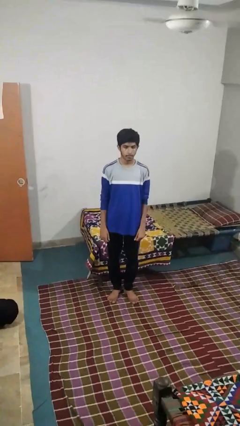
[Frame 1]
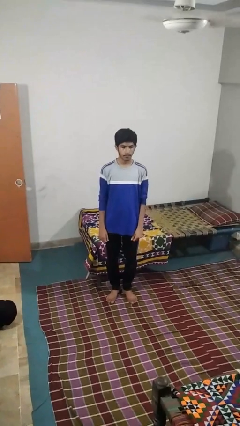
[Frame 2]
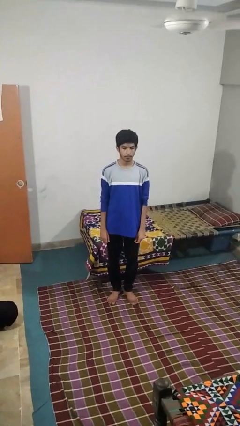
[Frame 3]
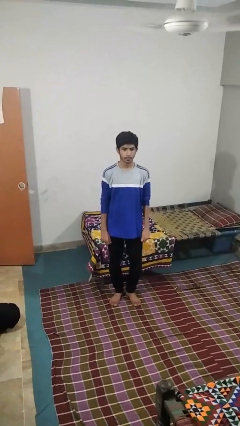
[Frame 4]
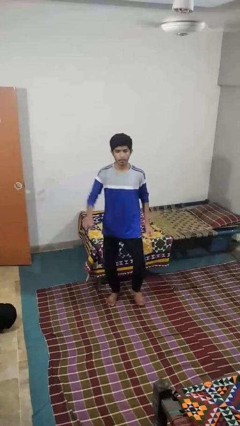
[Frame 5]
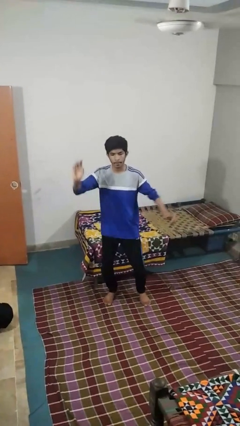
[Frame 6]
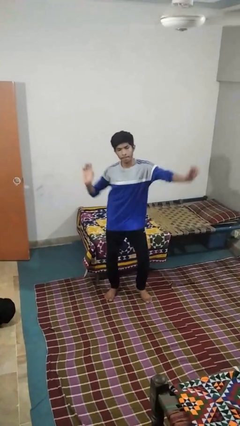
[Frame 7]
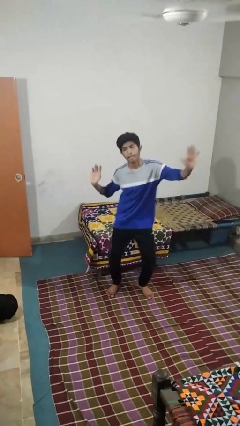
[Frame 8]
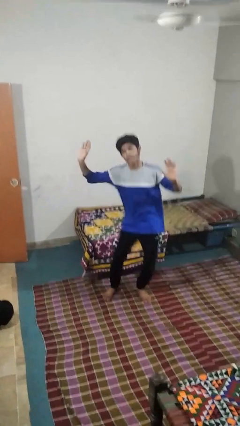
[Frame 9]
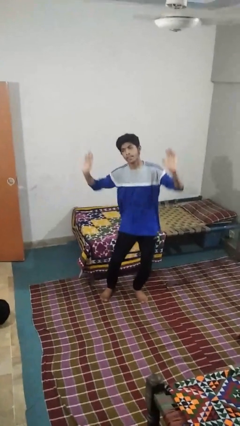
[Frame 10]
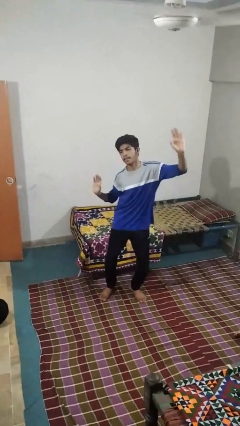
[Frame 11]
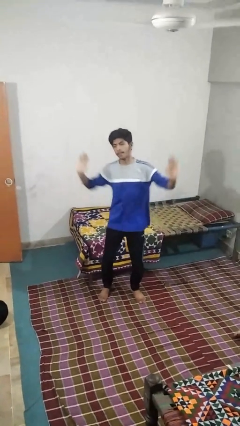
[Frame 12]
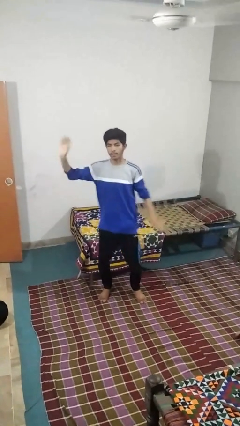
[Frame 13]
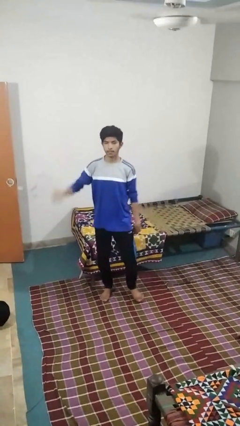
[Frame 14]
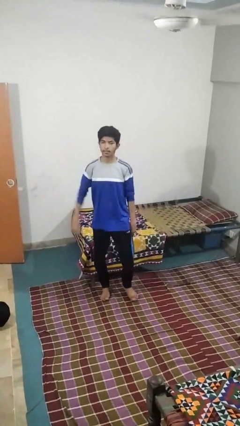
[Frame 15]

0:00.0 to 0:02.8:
person dances in place

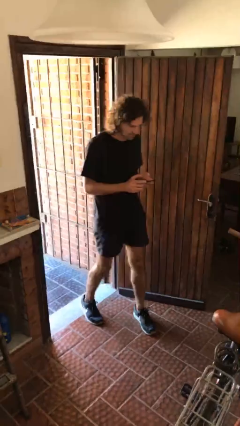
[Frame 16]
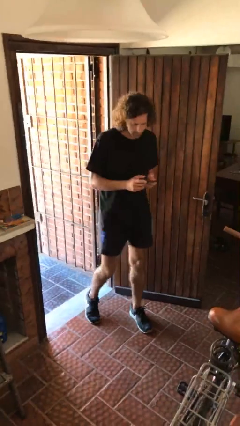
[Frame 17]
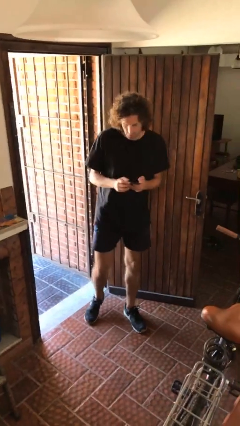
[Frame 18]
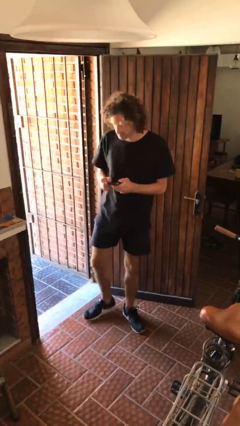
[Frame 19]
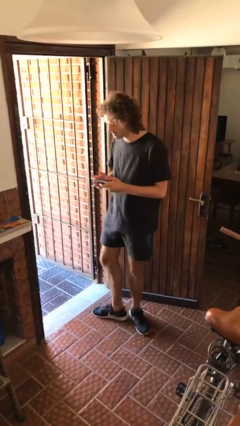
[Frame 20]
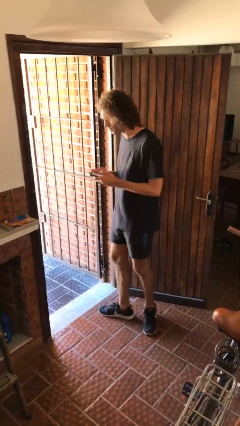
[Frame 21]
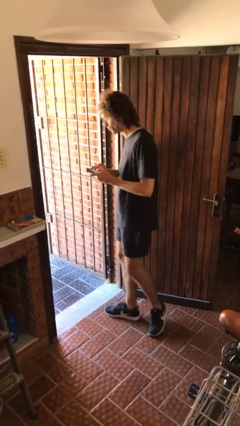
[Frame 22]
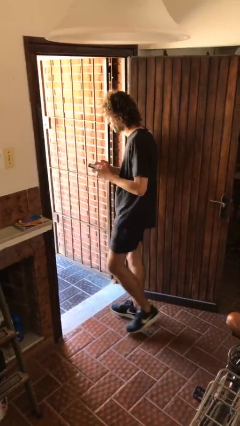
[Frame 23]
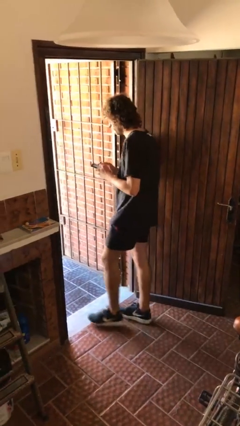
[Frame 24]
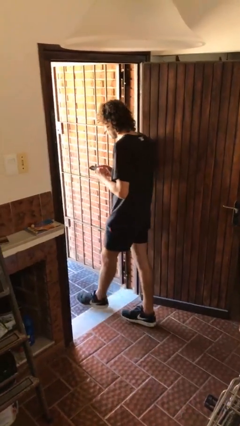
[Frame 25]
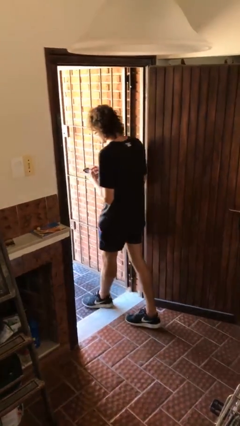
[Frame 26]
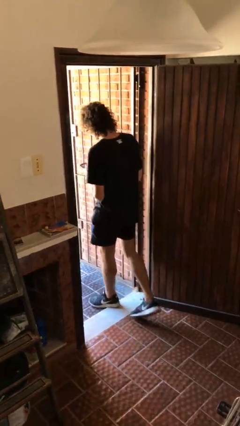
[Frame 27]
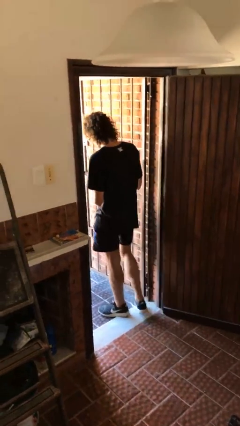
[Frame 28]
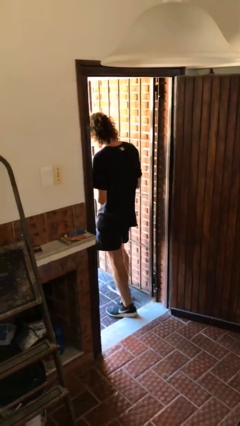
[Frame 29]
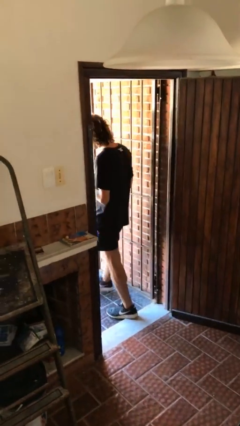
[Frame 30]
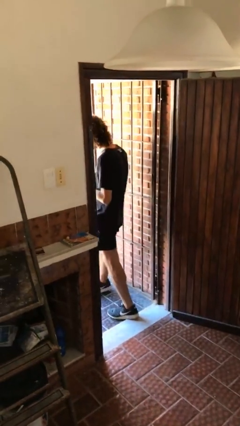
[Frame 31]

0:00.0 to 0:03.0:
person exits scene through structure

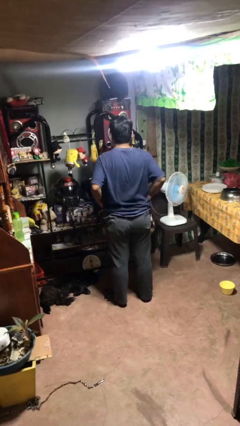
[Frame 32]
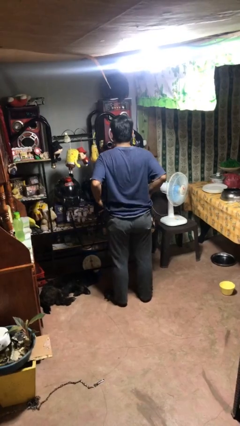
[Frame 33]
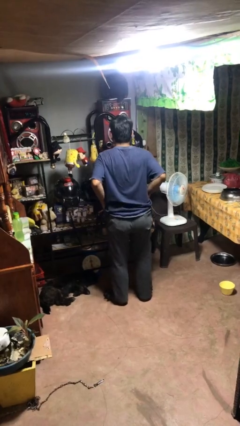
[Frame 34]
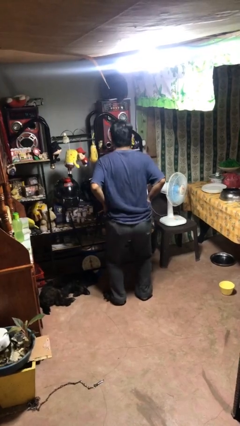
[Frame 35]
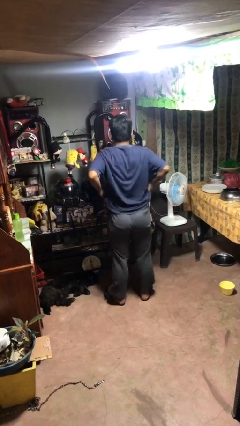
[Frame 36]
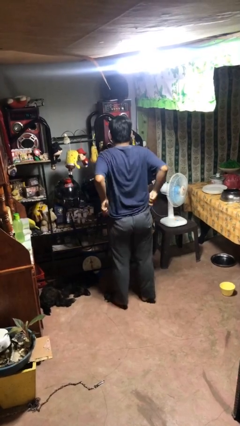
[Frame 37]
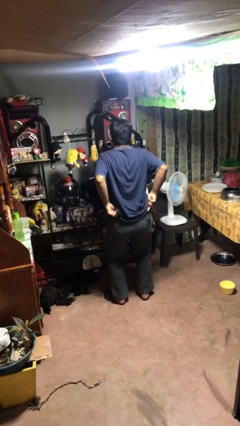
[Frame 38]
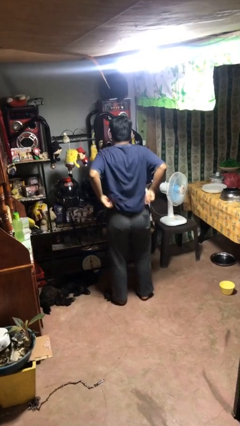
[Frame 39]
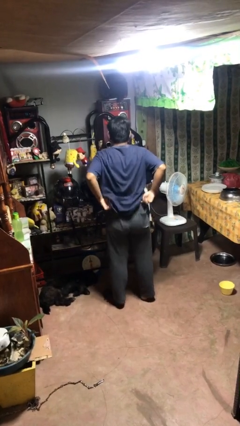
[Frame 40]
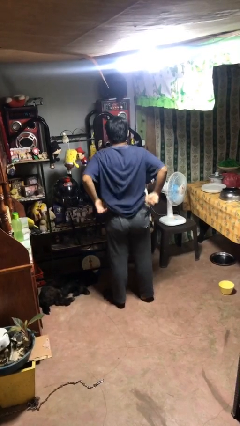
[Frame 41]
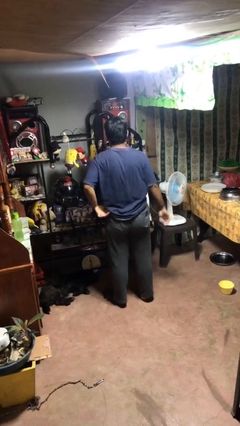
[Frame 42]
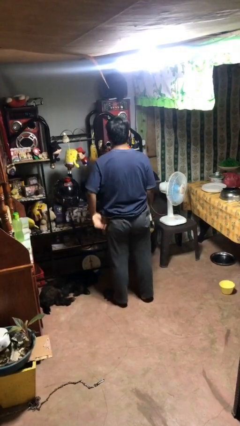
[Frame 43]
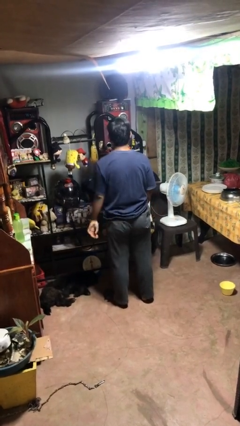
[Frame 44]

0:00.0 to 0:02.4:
person hikes up pants

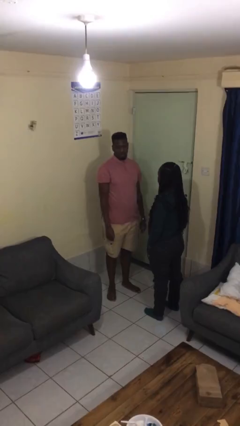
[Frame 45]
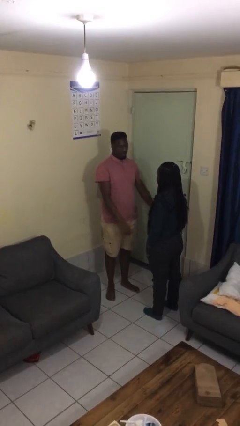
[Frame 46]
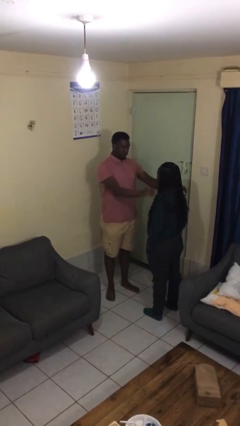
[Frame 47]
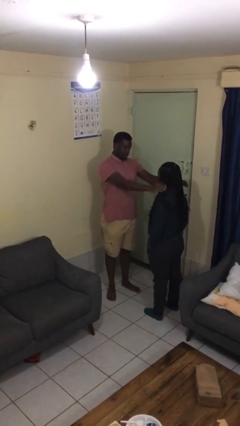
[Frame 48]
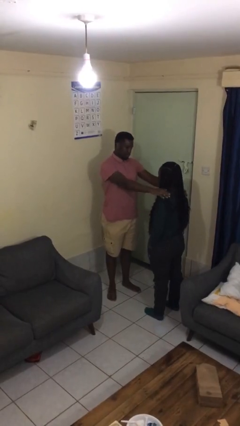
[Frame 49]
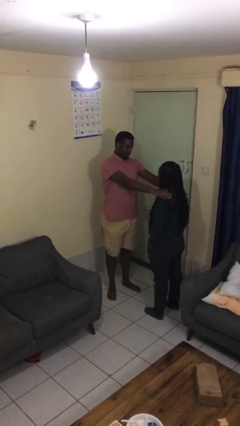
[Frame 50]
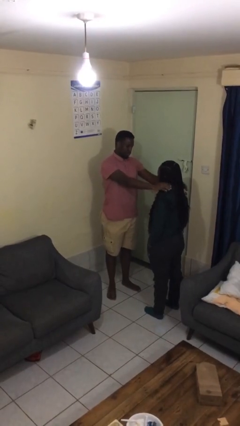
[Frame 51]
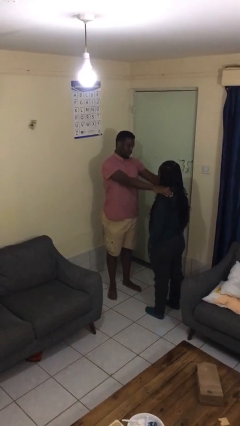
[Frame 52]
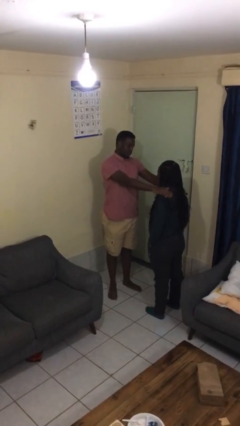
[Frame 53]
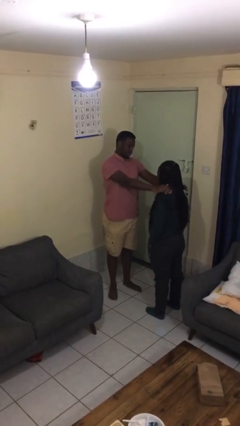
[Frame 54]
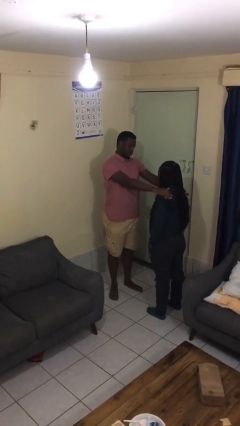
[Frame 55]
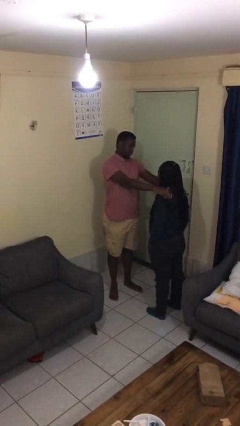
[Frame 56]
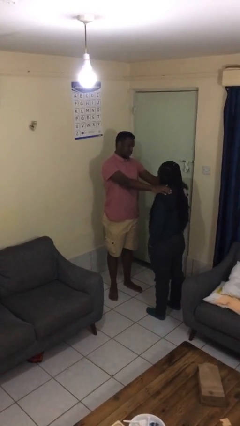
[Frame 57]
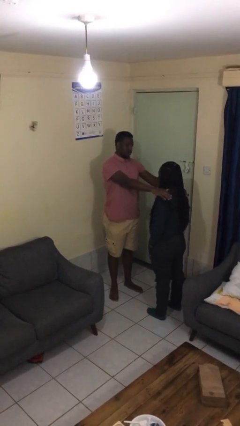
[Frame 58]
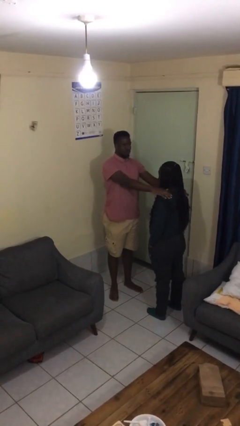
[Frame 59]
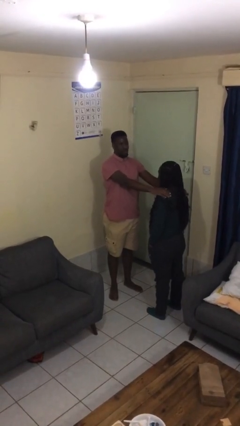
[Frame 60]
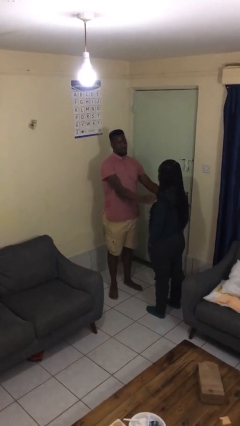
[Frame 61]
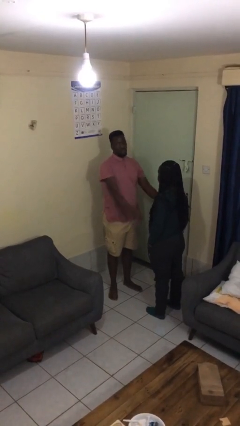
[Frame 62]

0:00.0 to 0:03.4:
person pounds shoulders of person

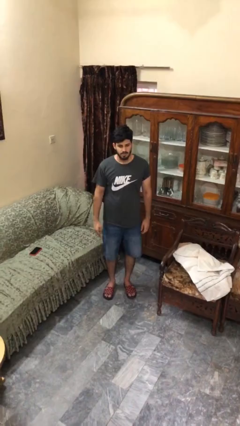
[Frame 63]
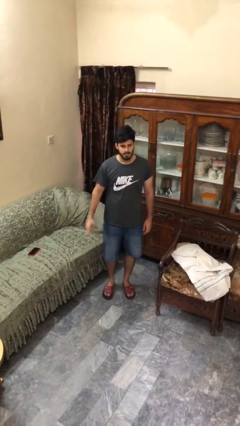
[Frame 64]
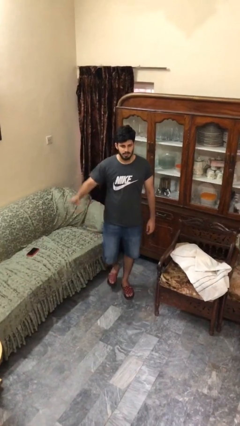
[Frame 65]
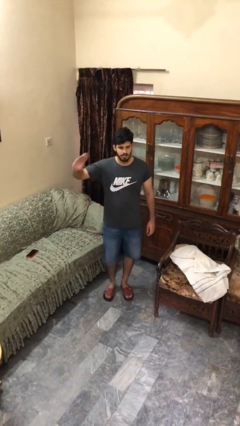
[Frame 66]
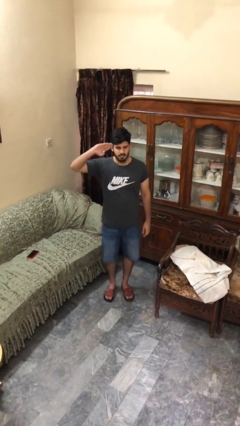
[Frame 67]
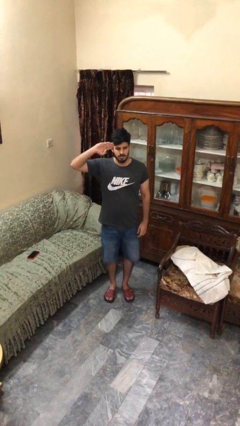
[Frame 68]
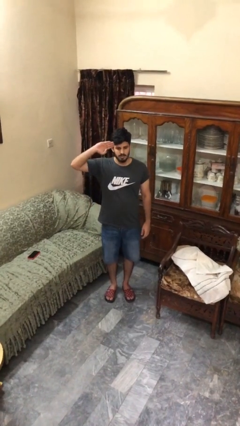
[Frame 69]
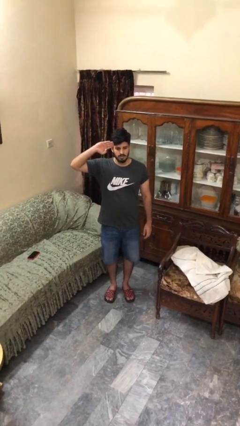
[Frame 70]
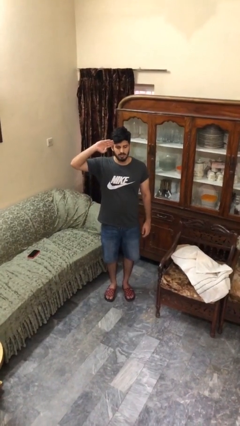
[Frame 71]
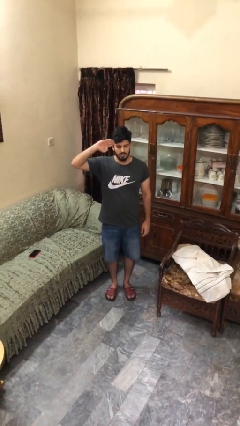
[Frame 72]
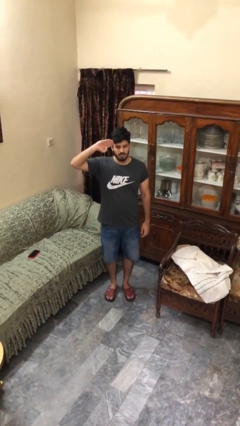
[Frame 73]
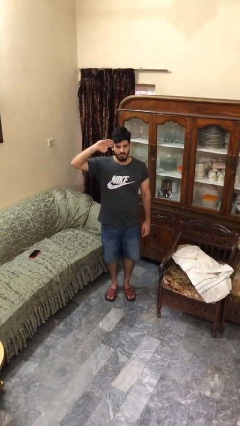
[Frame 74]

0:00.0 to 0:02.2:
person salutes

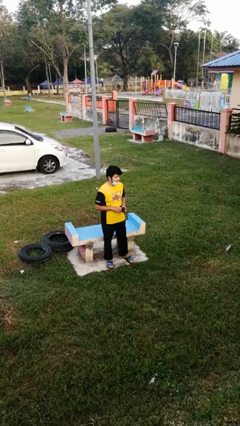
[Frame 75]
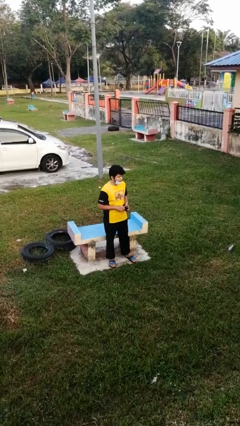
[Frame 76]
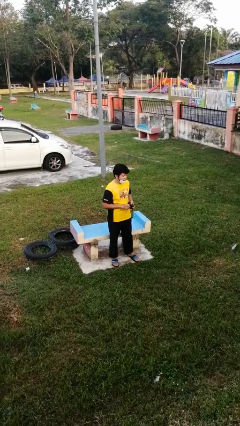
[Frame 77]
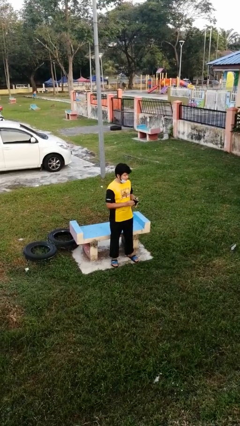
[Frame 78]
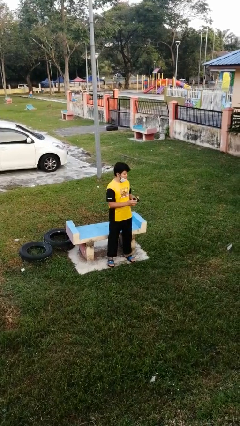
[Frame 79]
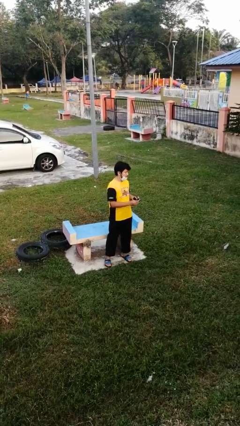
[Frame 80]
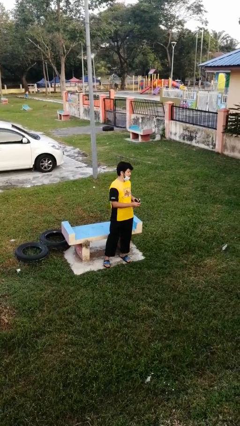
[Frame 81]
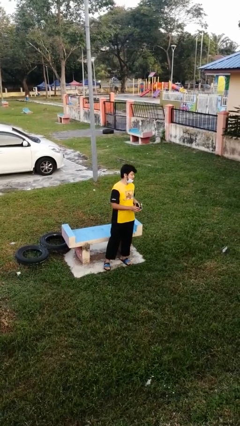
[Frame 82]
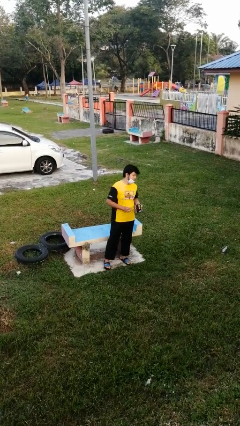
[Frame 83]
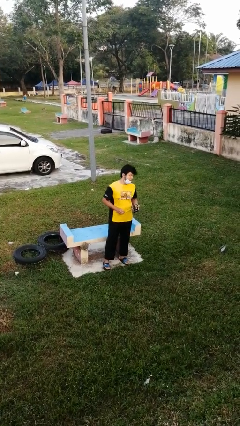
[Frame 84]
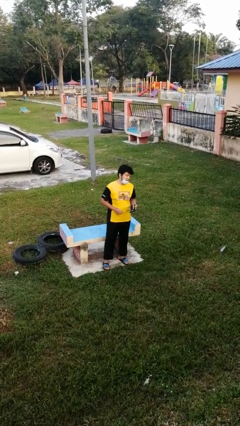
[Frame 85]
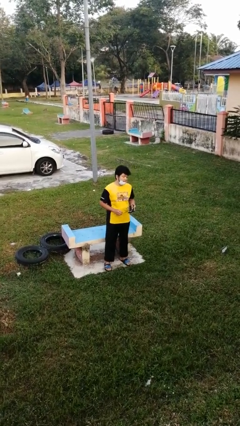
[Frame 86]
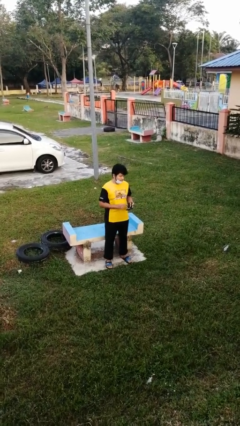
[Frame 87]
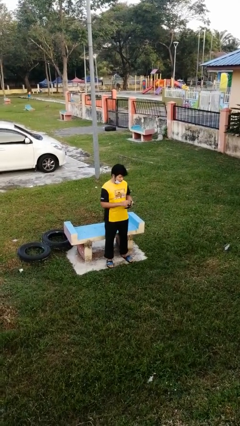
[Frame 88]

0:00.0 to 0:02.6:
person searches in purse

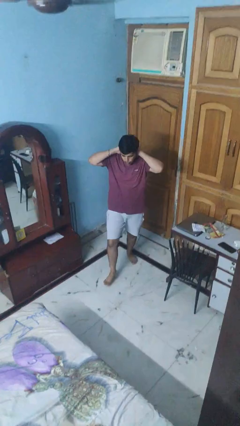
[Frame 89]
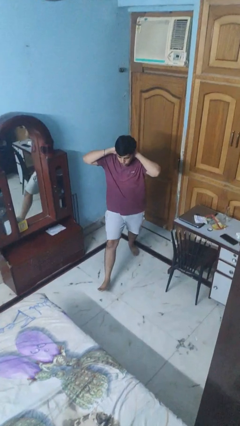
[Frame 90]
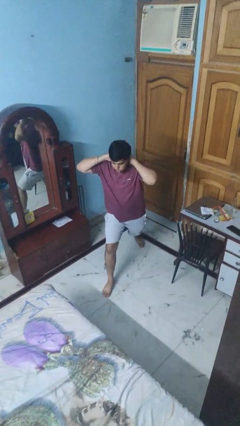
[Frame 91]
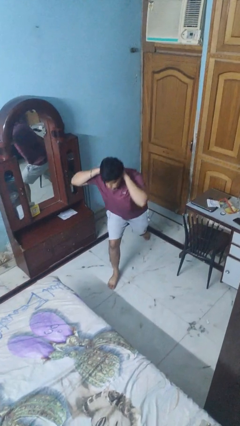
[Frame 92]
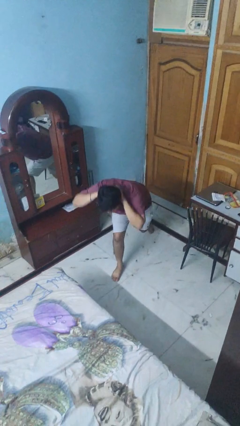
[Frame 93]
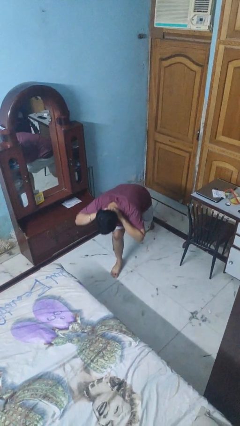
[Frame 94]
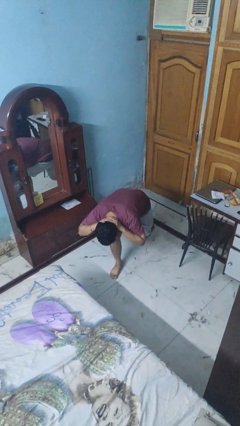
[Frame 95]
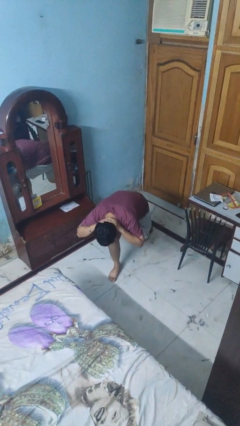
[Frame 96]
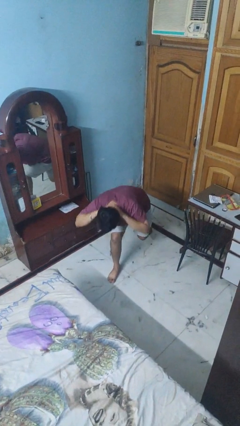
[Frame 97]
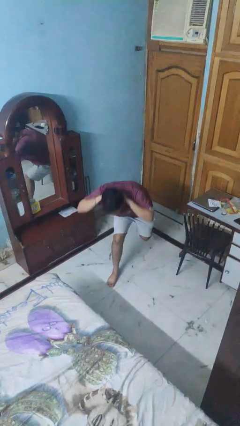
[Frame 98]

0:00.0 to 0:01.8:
person exercises with lunges
